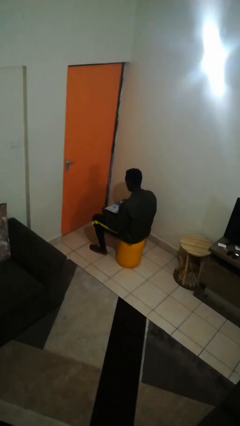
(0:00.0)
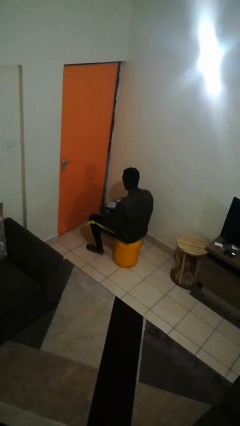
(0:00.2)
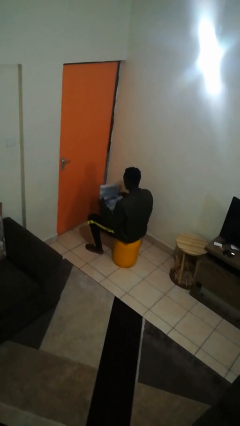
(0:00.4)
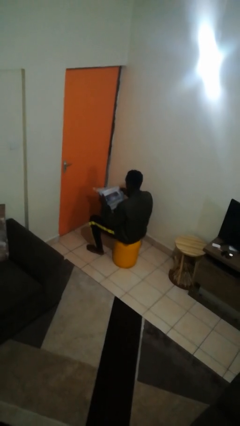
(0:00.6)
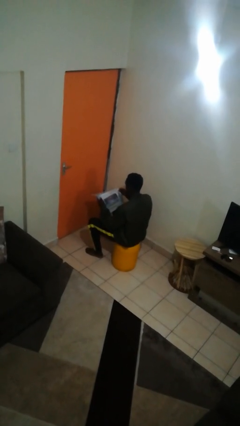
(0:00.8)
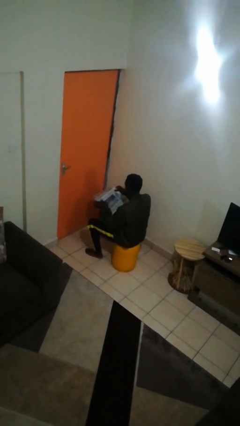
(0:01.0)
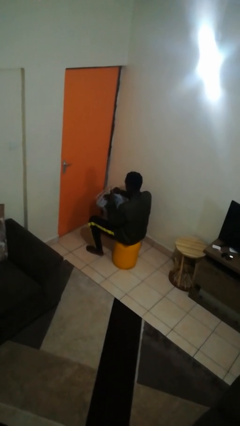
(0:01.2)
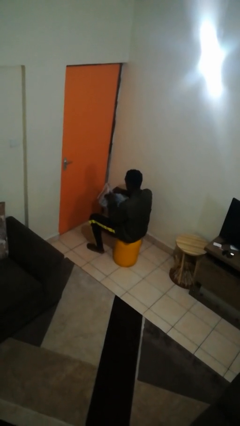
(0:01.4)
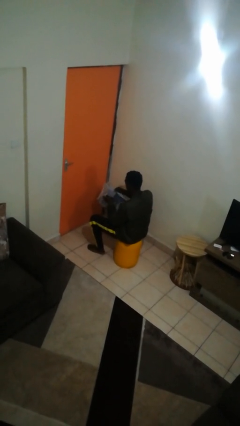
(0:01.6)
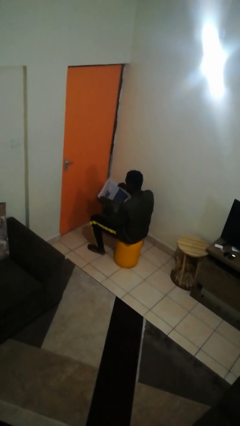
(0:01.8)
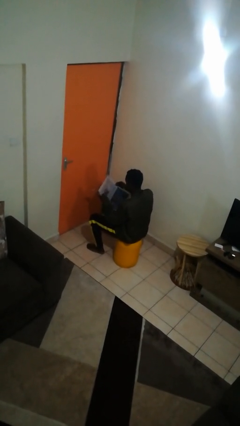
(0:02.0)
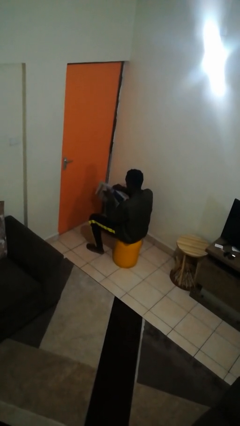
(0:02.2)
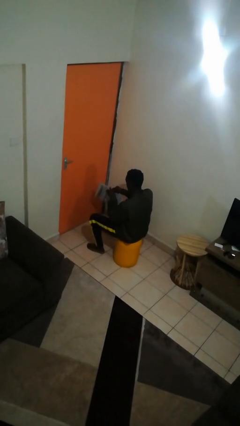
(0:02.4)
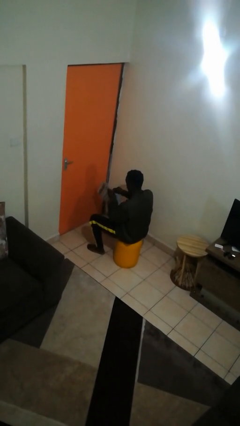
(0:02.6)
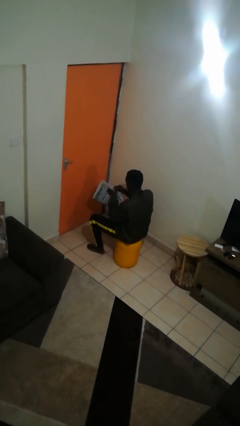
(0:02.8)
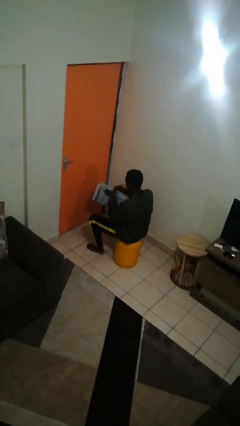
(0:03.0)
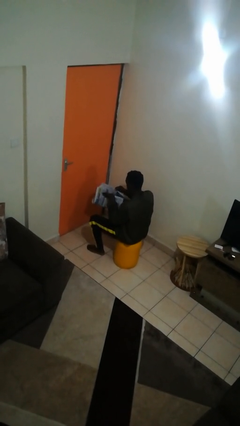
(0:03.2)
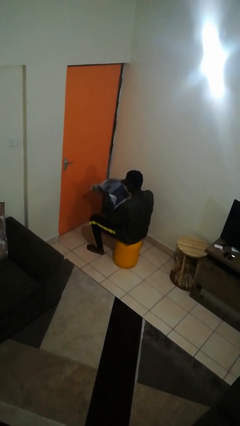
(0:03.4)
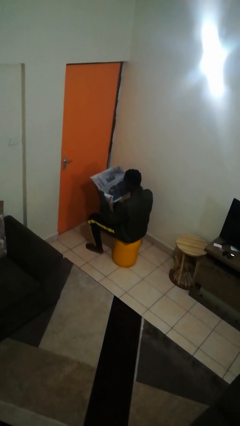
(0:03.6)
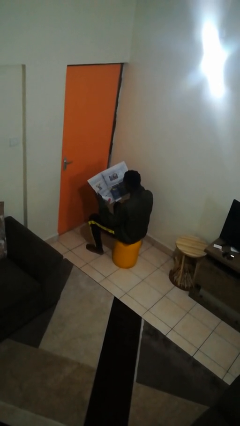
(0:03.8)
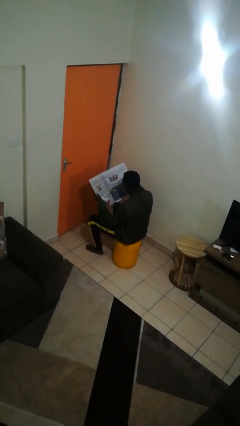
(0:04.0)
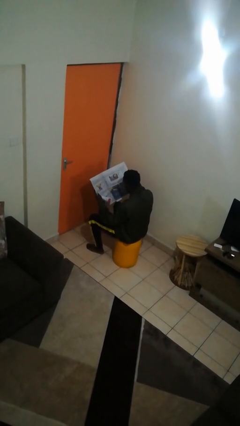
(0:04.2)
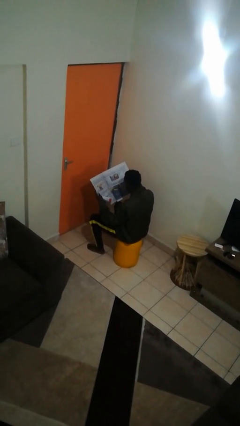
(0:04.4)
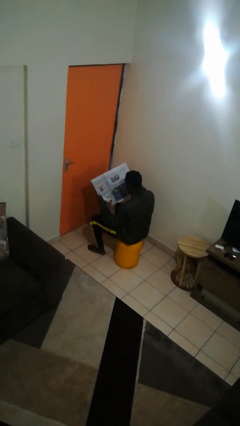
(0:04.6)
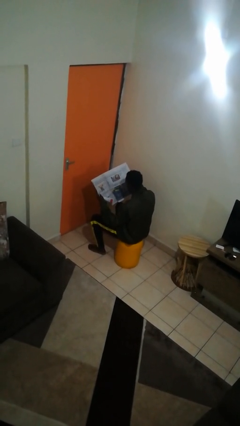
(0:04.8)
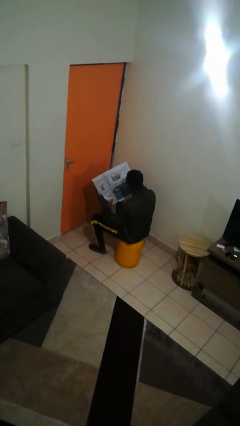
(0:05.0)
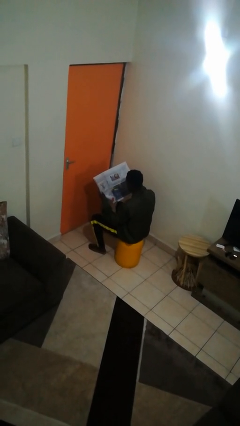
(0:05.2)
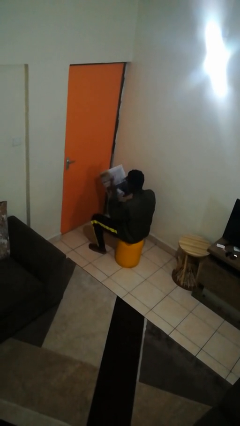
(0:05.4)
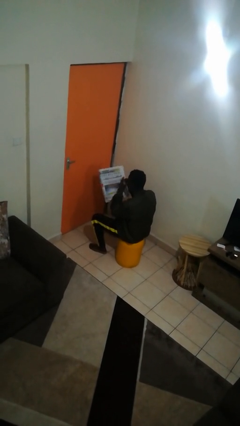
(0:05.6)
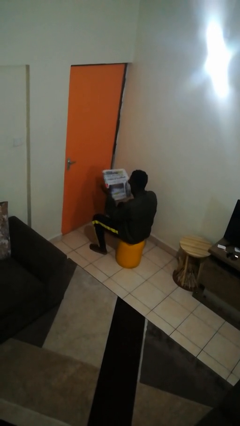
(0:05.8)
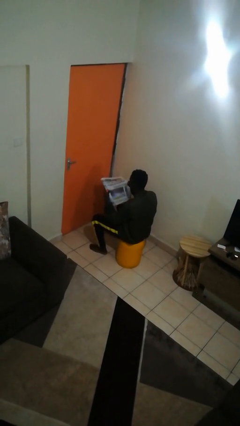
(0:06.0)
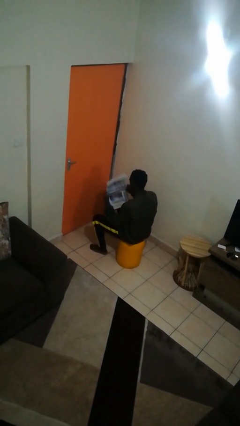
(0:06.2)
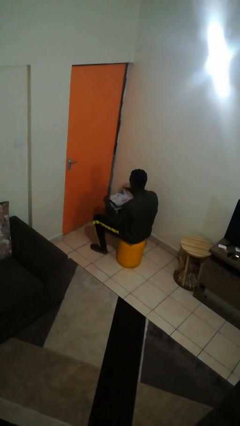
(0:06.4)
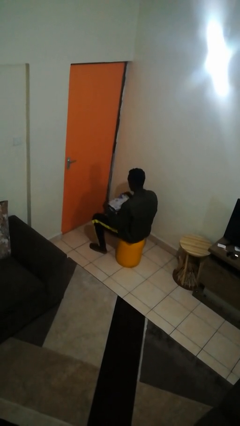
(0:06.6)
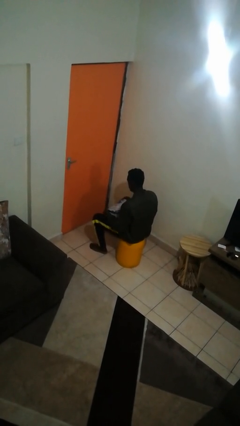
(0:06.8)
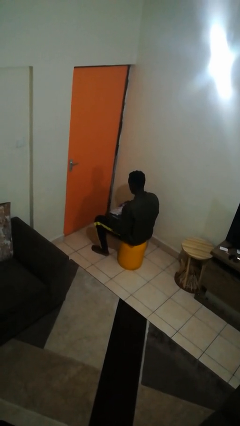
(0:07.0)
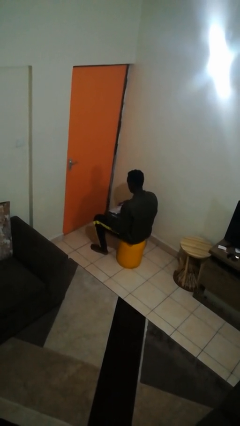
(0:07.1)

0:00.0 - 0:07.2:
person reads newspaper

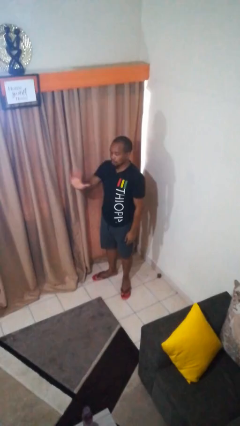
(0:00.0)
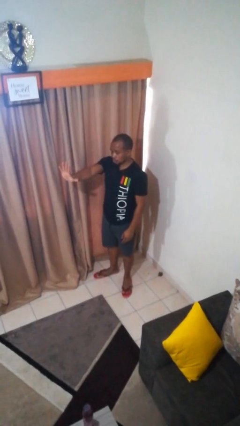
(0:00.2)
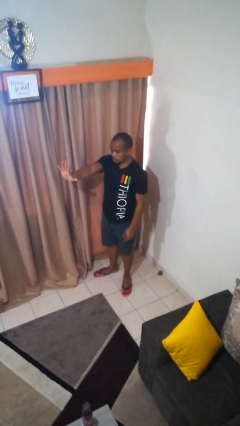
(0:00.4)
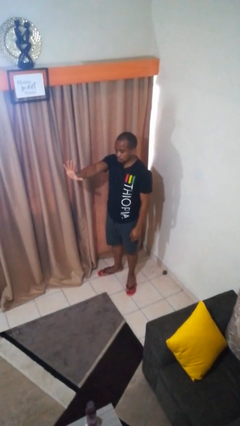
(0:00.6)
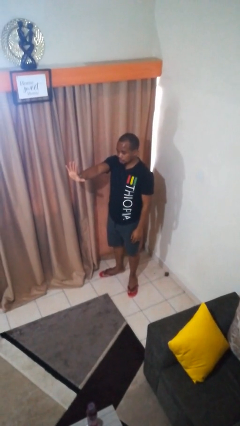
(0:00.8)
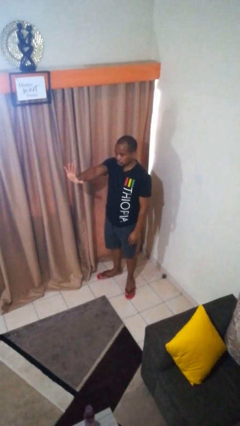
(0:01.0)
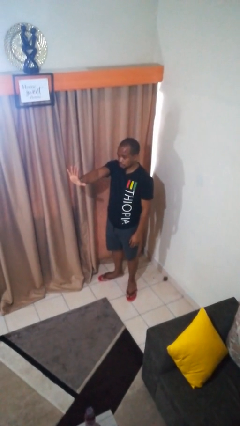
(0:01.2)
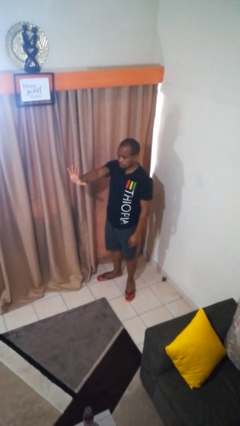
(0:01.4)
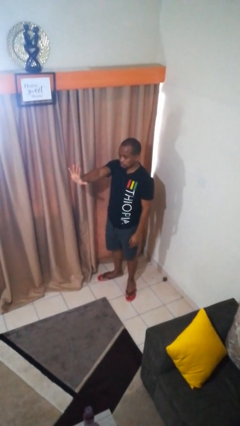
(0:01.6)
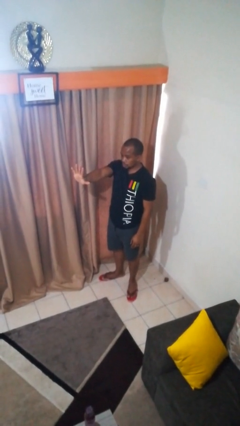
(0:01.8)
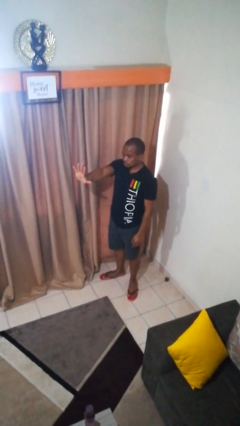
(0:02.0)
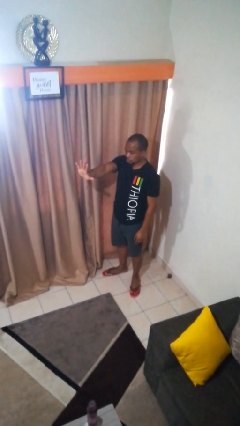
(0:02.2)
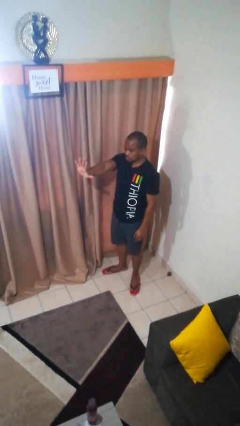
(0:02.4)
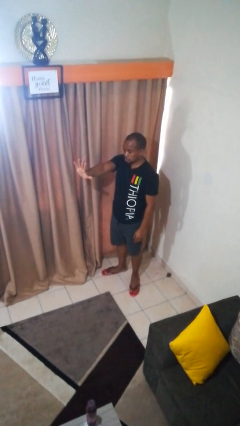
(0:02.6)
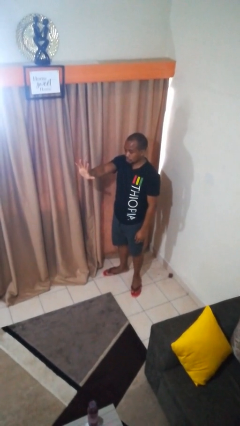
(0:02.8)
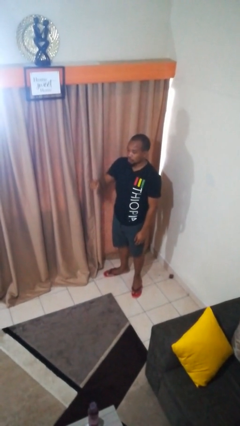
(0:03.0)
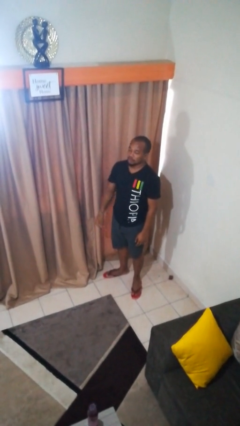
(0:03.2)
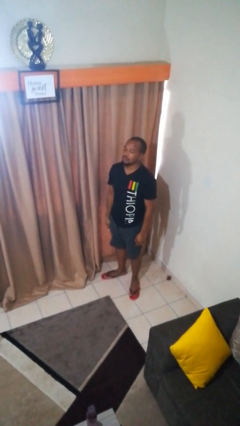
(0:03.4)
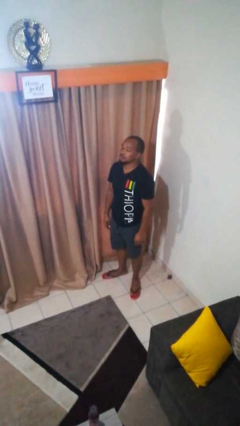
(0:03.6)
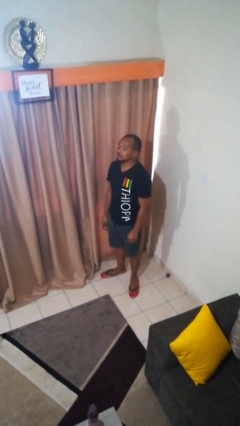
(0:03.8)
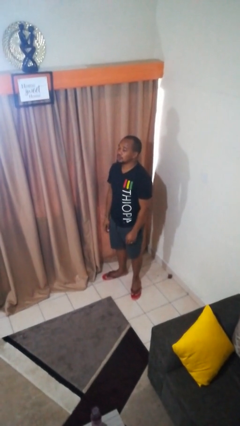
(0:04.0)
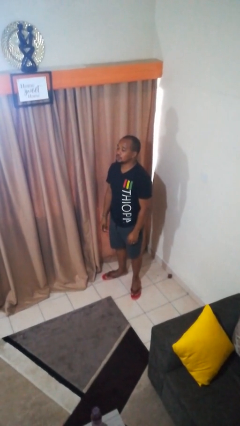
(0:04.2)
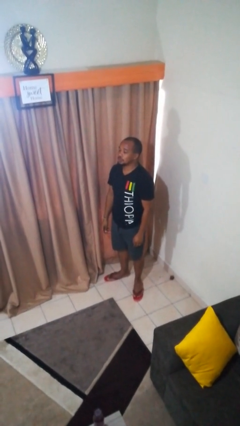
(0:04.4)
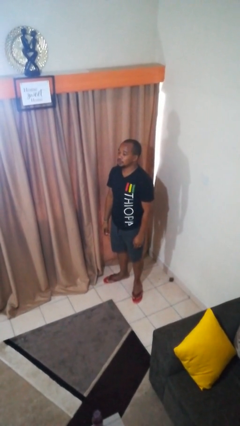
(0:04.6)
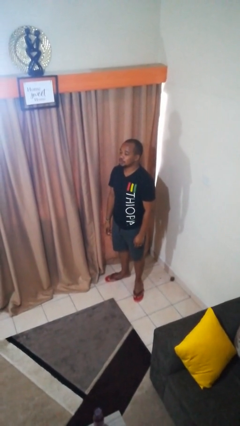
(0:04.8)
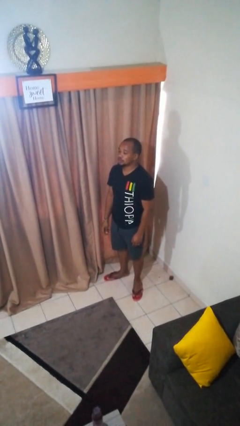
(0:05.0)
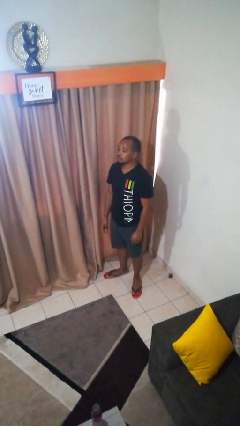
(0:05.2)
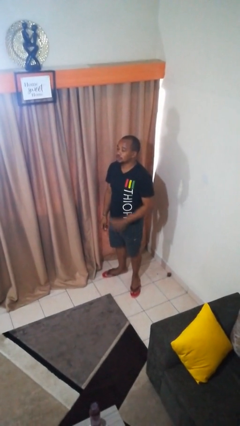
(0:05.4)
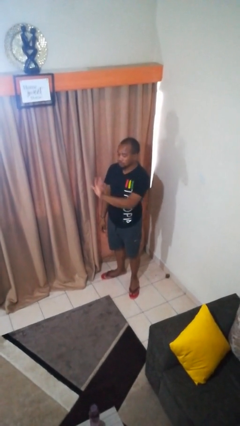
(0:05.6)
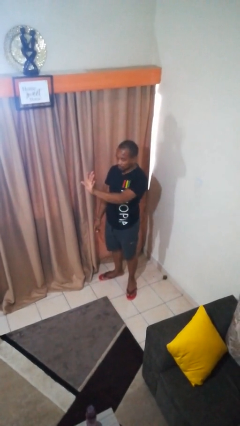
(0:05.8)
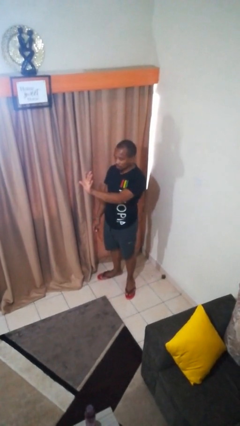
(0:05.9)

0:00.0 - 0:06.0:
person gestures number five

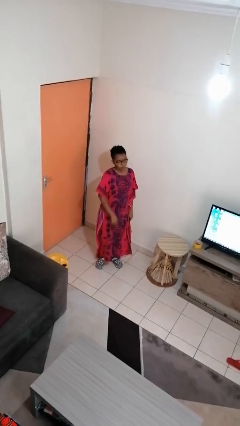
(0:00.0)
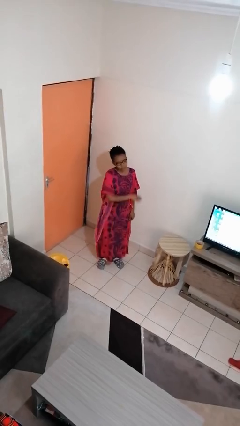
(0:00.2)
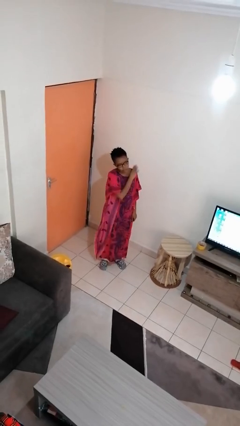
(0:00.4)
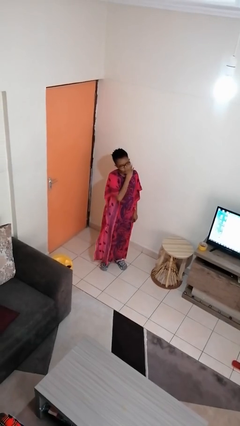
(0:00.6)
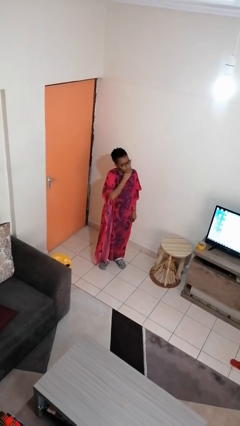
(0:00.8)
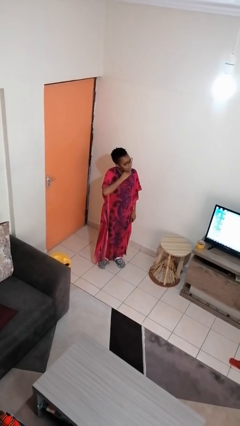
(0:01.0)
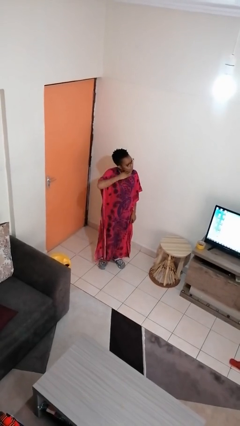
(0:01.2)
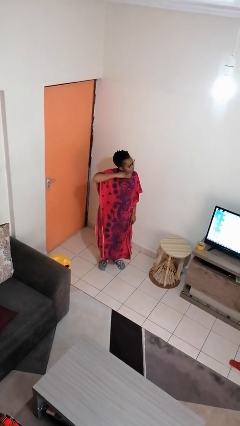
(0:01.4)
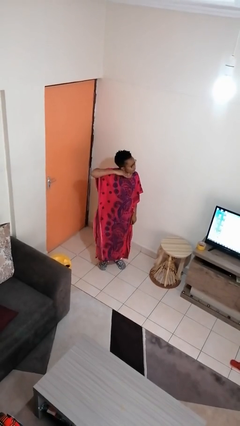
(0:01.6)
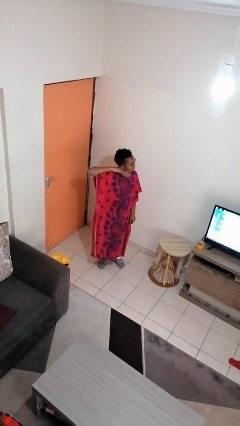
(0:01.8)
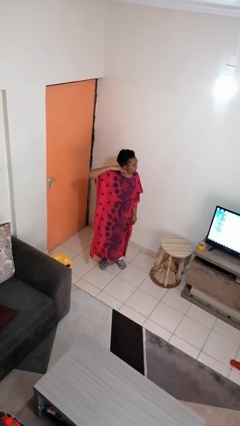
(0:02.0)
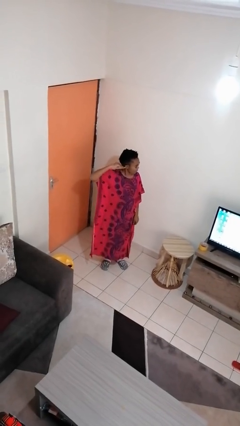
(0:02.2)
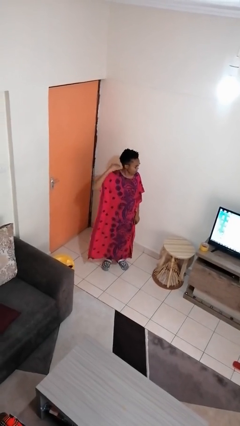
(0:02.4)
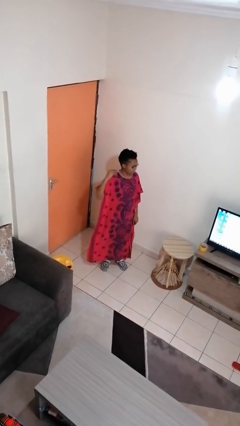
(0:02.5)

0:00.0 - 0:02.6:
person gestures cut

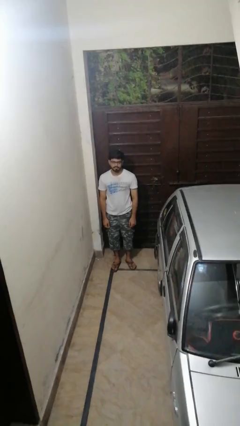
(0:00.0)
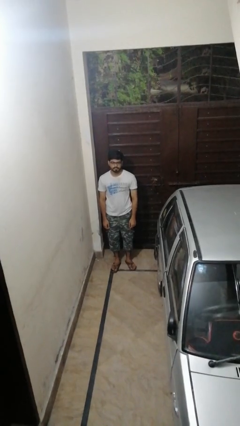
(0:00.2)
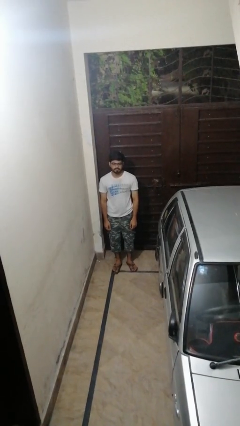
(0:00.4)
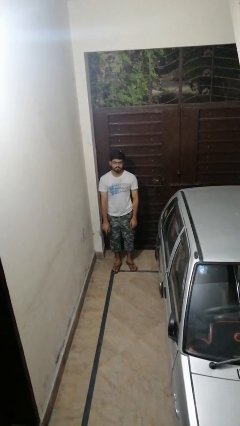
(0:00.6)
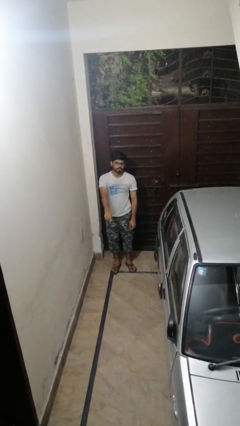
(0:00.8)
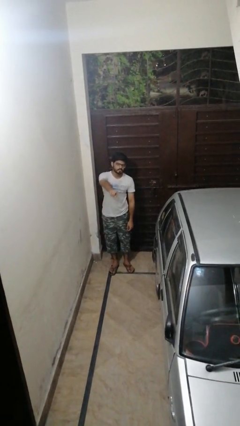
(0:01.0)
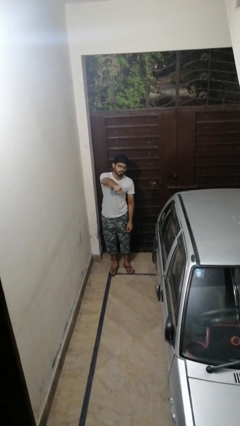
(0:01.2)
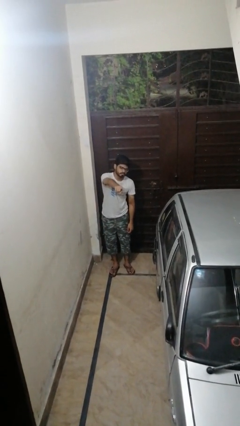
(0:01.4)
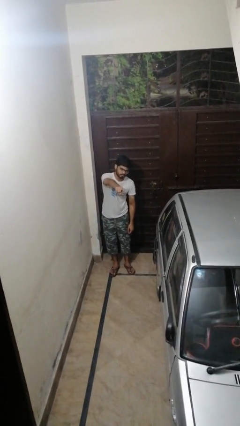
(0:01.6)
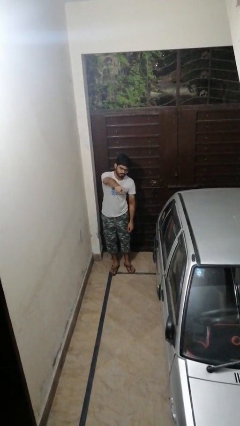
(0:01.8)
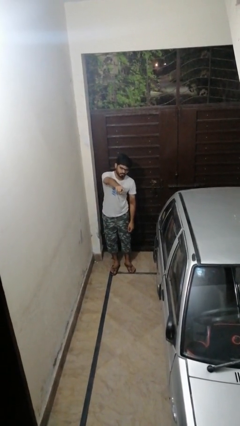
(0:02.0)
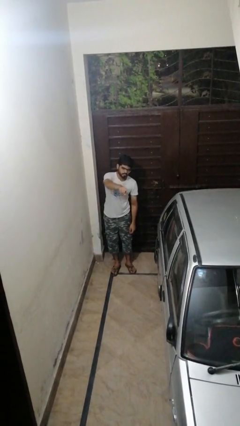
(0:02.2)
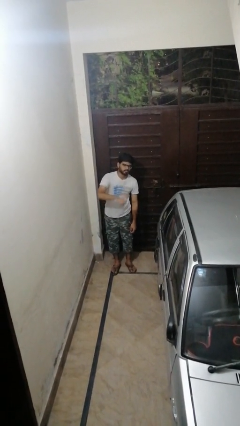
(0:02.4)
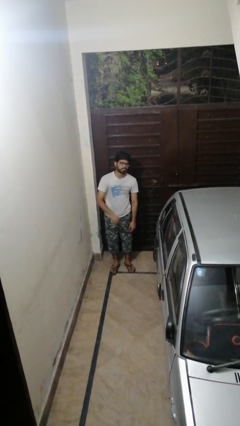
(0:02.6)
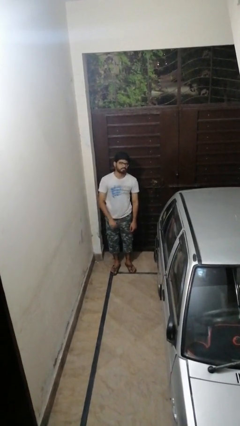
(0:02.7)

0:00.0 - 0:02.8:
person points at person
